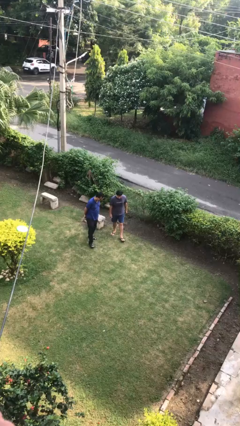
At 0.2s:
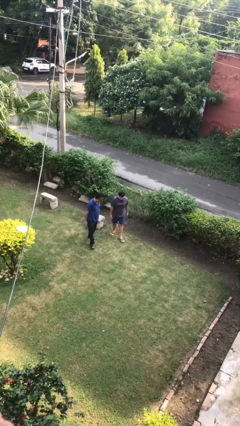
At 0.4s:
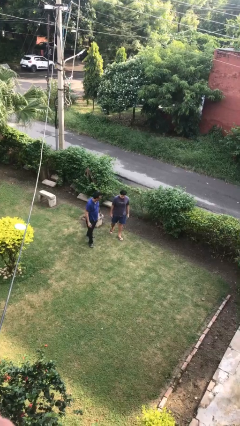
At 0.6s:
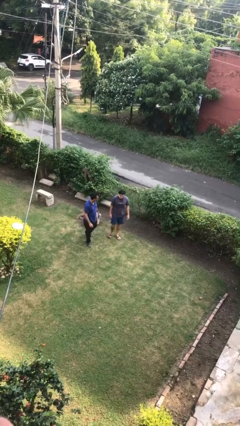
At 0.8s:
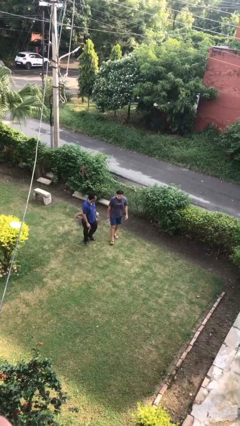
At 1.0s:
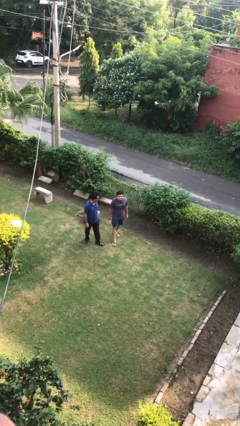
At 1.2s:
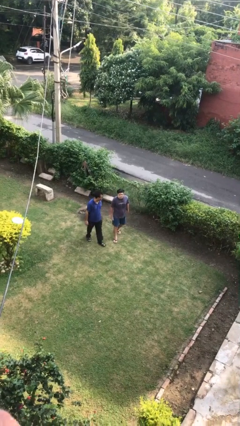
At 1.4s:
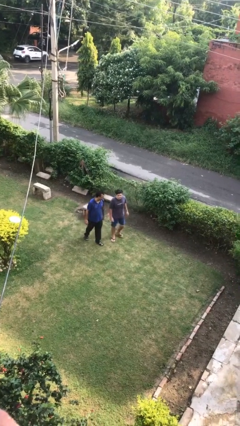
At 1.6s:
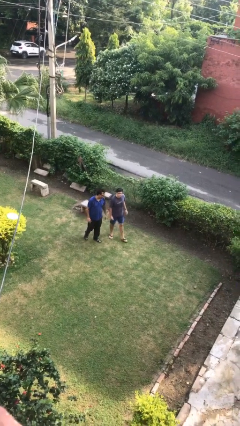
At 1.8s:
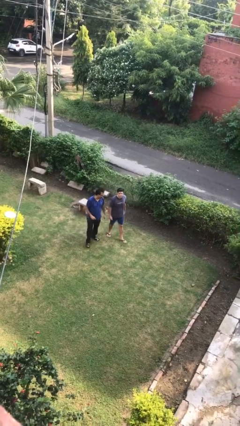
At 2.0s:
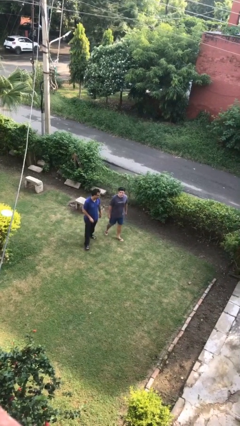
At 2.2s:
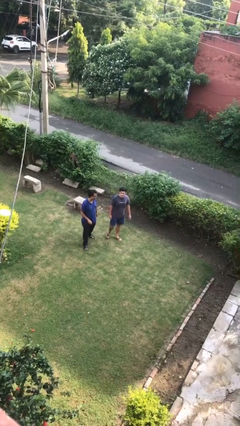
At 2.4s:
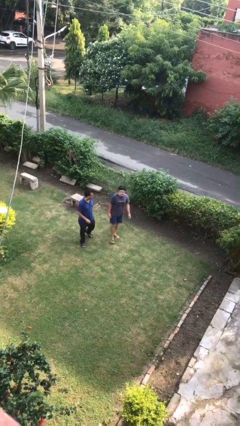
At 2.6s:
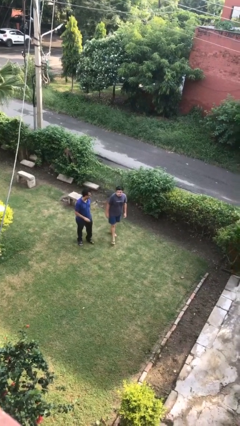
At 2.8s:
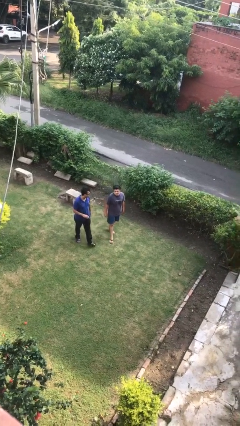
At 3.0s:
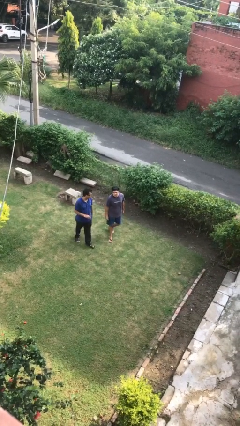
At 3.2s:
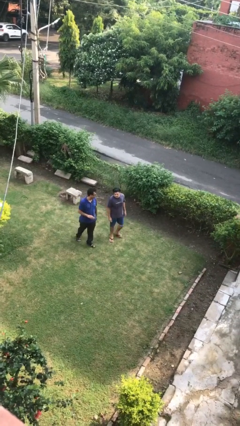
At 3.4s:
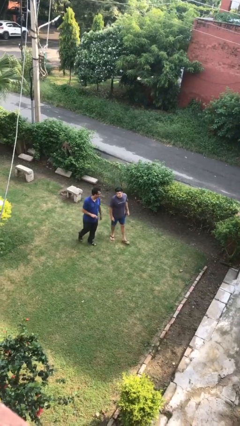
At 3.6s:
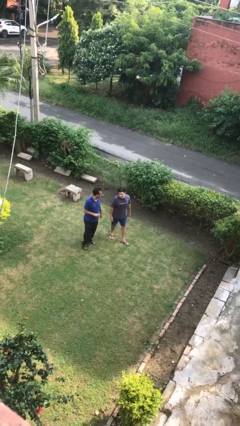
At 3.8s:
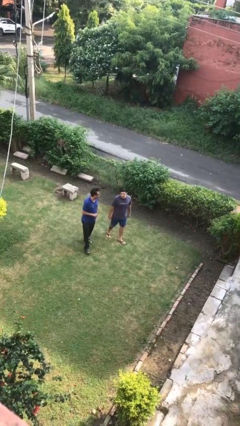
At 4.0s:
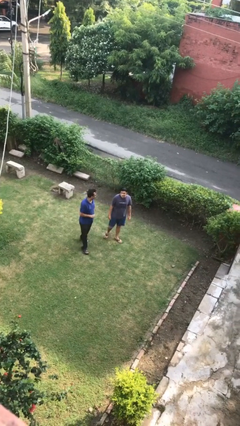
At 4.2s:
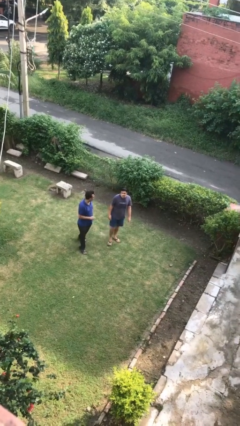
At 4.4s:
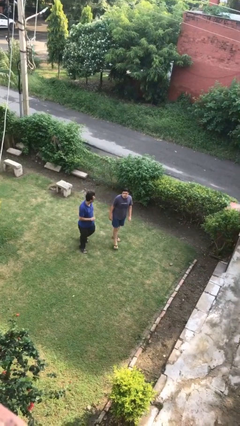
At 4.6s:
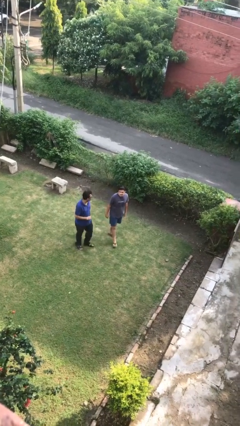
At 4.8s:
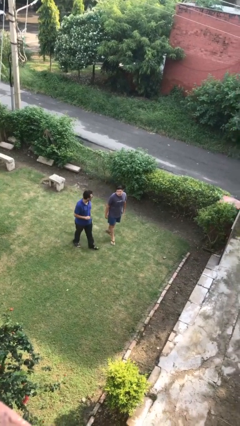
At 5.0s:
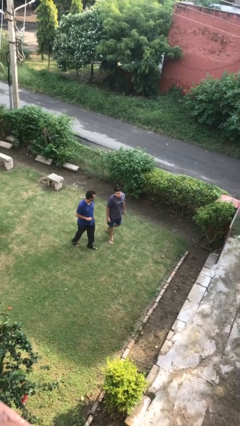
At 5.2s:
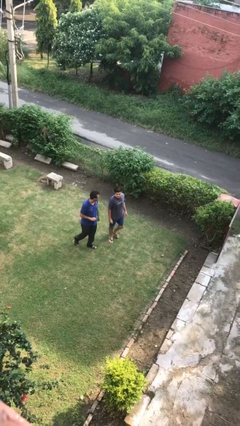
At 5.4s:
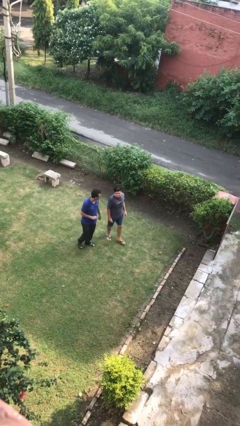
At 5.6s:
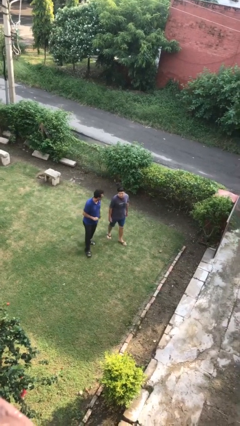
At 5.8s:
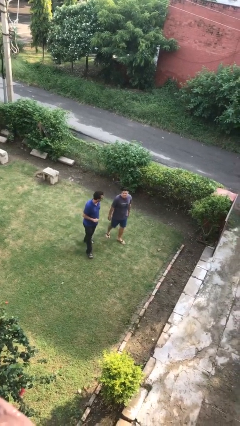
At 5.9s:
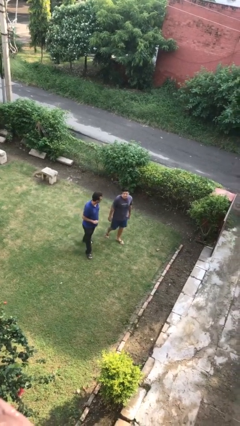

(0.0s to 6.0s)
person talks to person

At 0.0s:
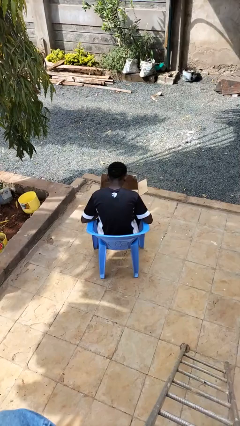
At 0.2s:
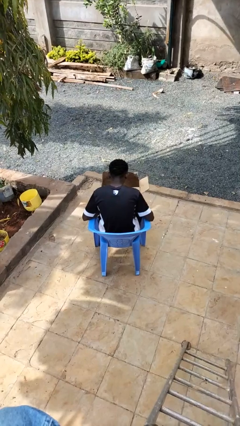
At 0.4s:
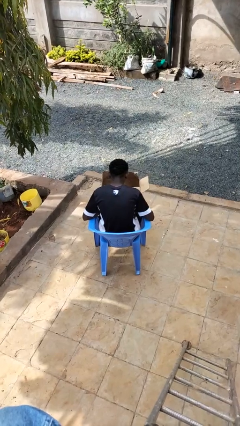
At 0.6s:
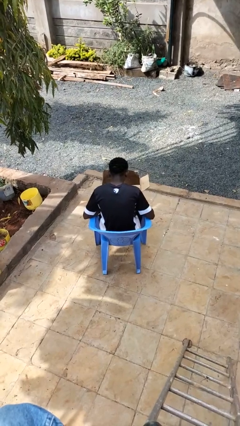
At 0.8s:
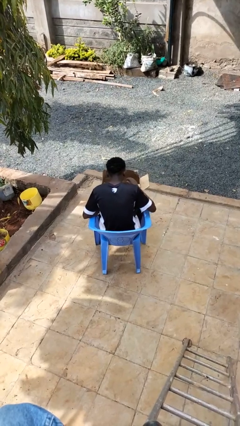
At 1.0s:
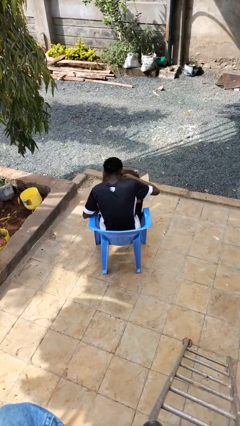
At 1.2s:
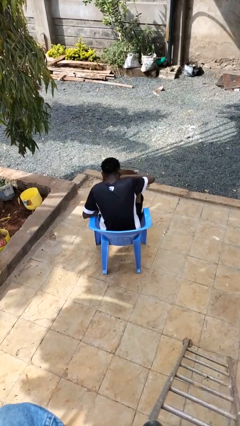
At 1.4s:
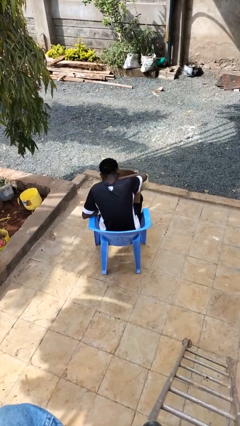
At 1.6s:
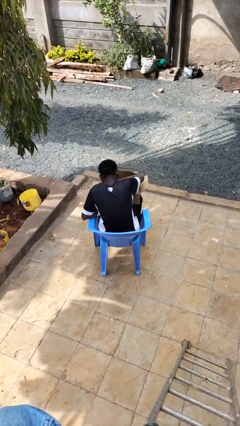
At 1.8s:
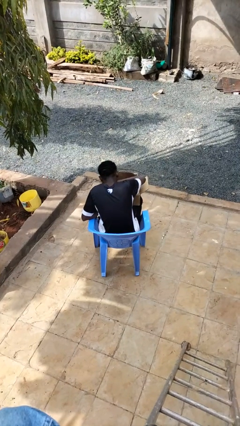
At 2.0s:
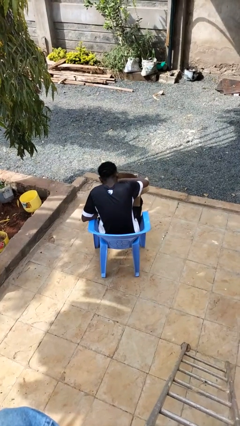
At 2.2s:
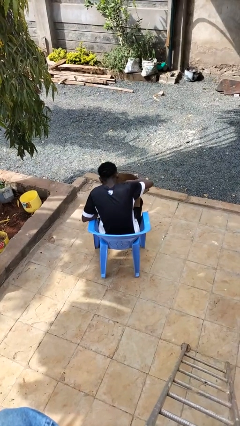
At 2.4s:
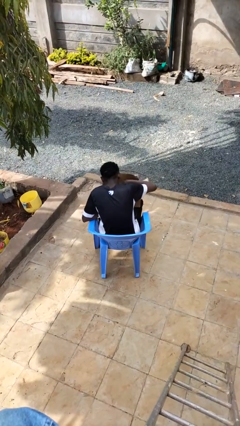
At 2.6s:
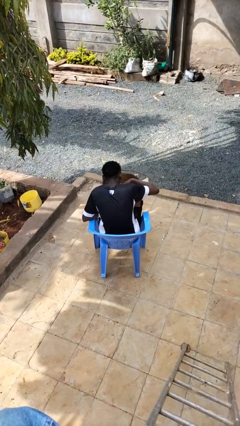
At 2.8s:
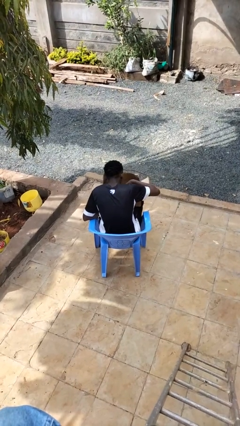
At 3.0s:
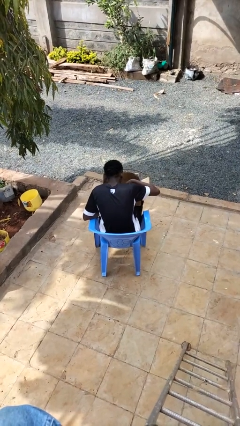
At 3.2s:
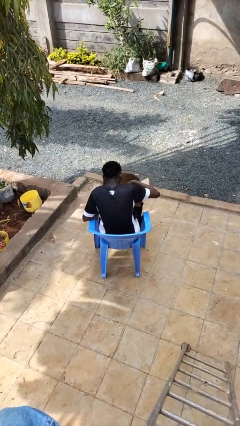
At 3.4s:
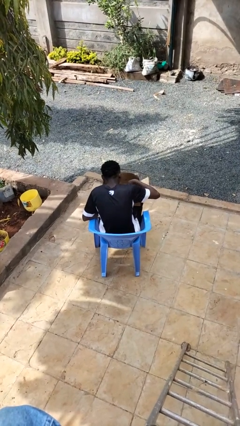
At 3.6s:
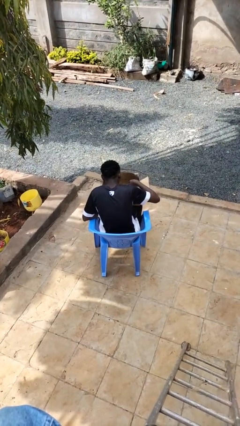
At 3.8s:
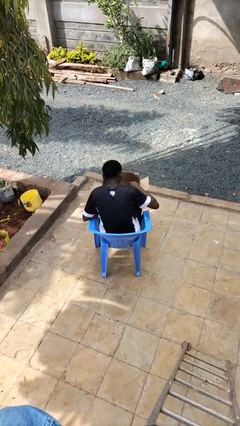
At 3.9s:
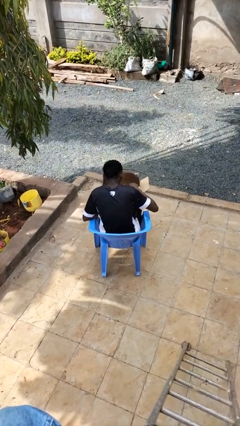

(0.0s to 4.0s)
person searches in box

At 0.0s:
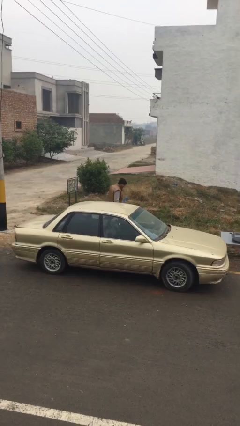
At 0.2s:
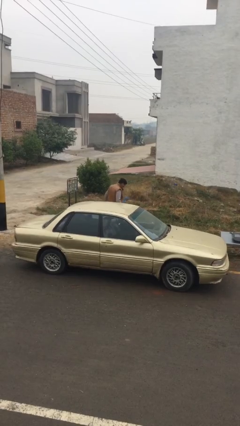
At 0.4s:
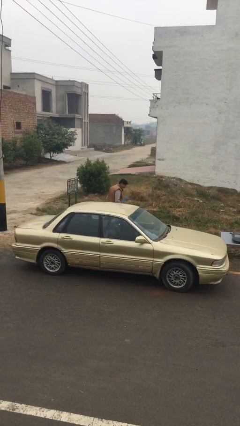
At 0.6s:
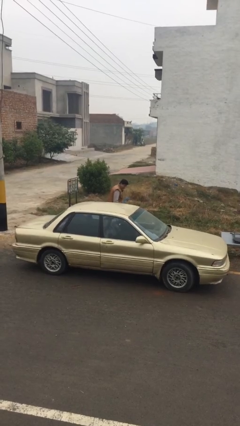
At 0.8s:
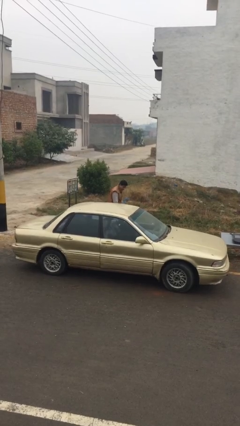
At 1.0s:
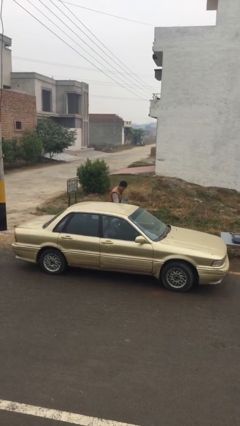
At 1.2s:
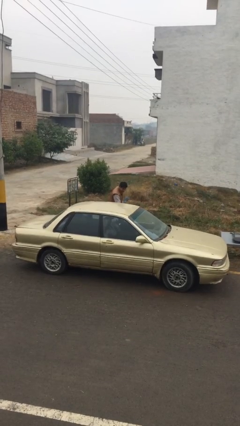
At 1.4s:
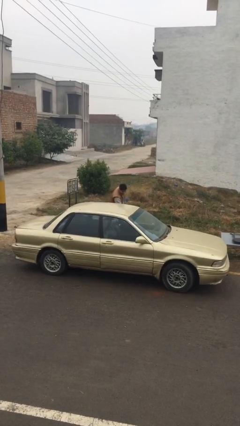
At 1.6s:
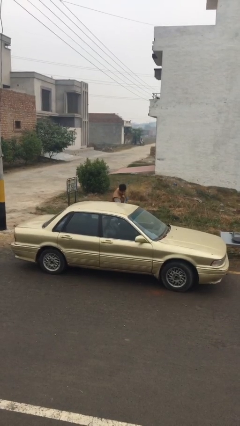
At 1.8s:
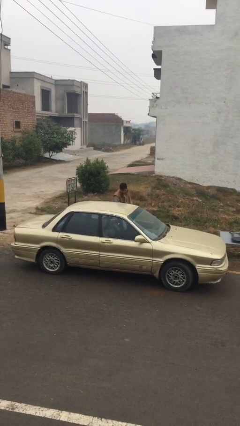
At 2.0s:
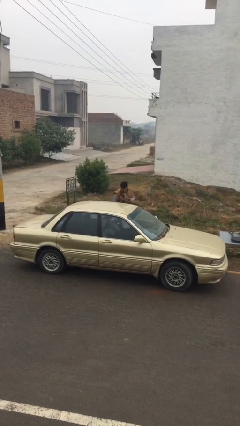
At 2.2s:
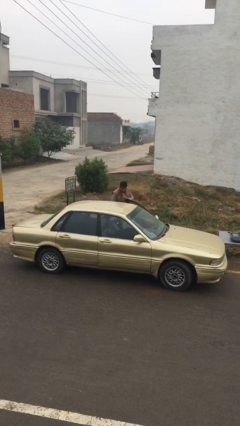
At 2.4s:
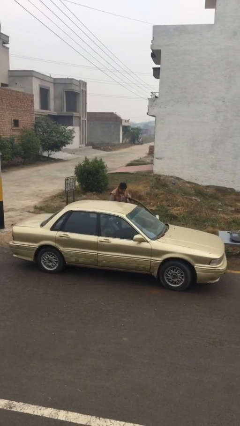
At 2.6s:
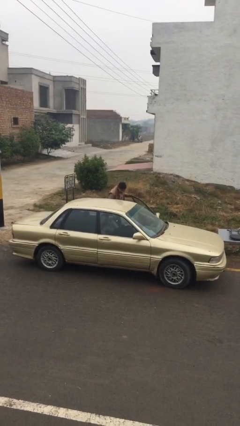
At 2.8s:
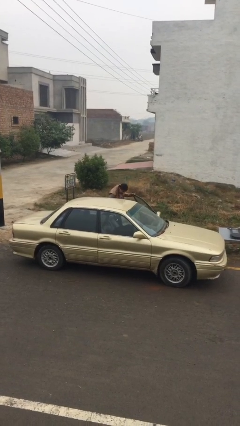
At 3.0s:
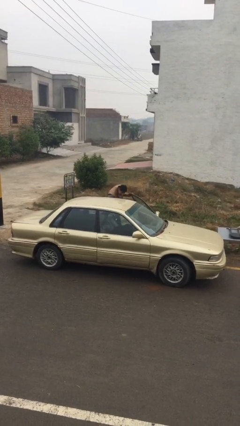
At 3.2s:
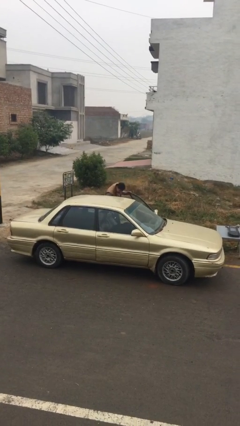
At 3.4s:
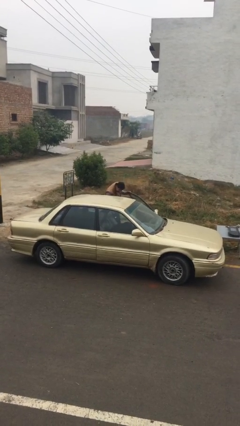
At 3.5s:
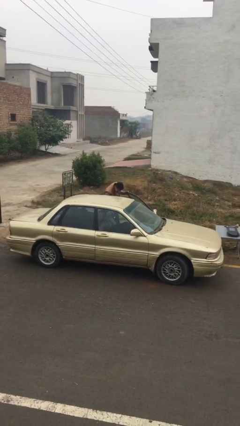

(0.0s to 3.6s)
person opens car door

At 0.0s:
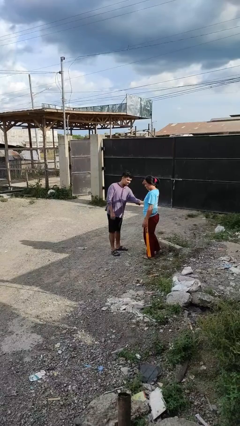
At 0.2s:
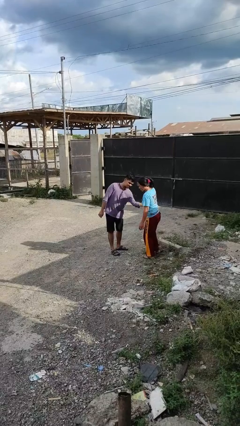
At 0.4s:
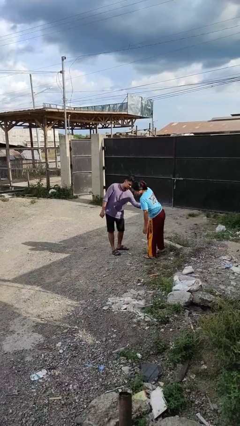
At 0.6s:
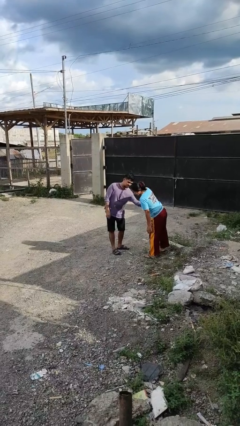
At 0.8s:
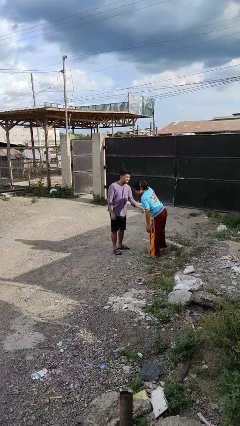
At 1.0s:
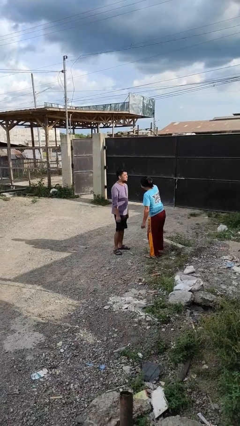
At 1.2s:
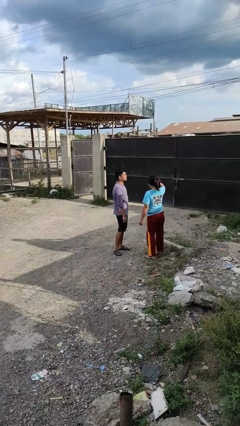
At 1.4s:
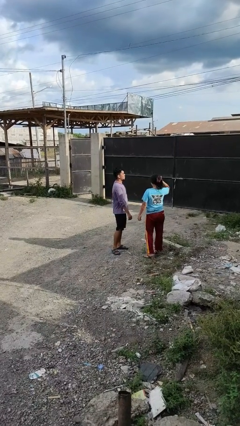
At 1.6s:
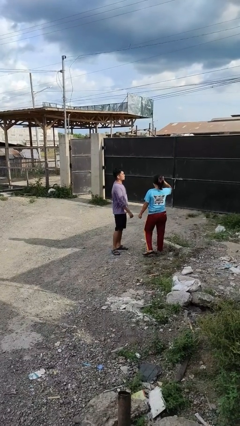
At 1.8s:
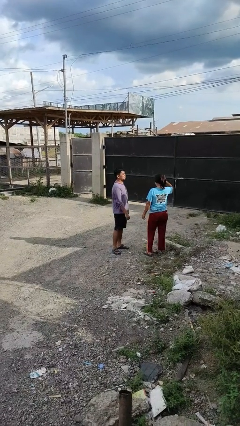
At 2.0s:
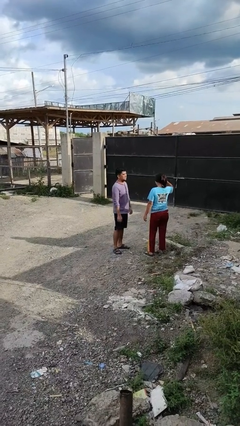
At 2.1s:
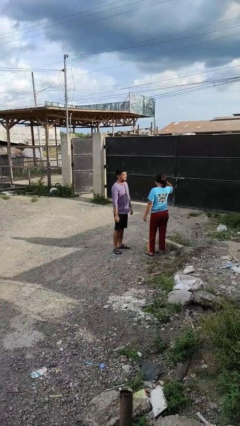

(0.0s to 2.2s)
person tickles person

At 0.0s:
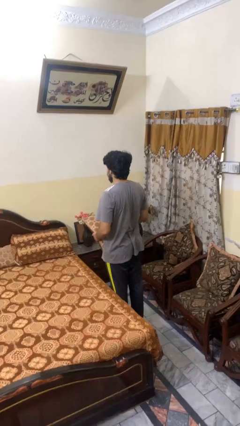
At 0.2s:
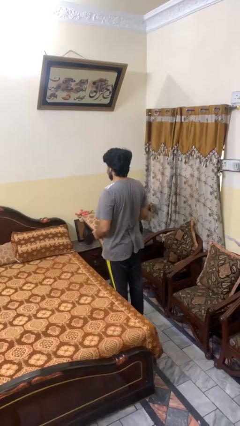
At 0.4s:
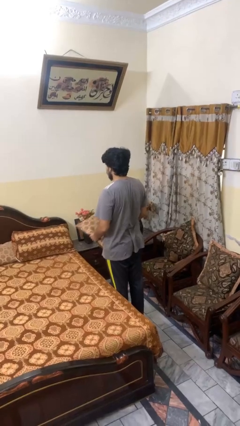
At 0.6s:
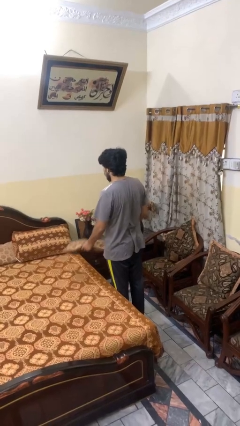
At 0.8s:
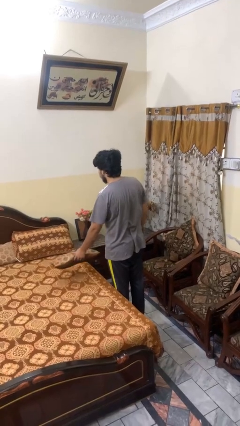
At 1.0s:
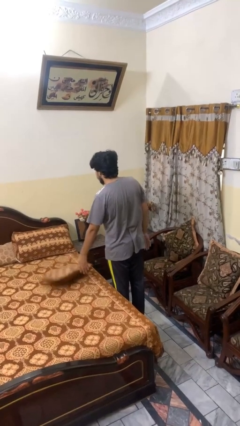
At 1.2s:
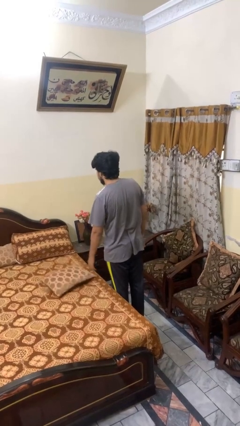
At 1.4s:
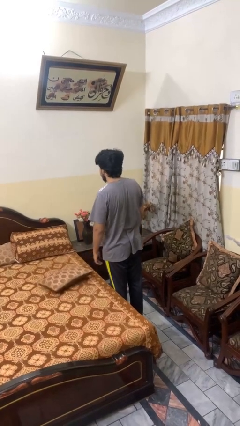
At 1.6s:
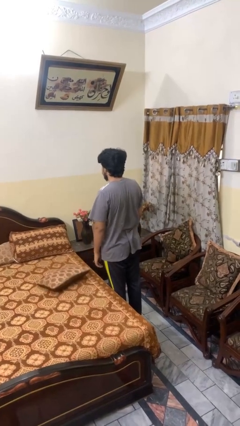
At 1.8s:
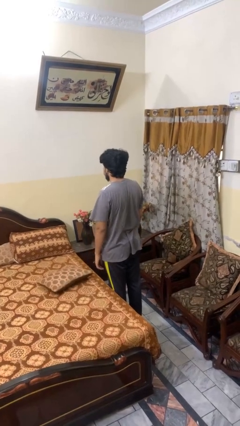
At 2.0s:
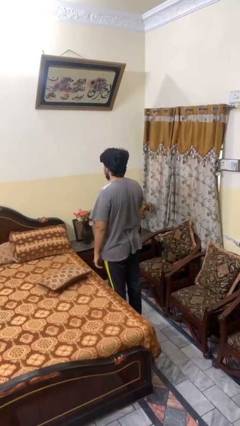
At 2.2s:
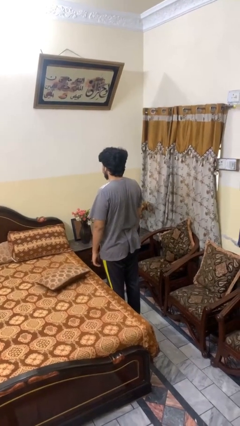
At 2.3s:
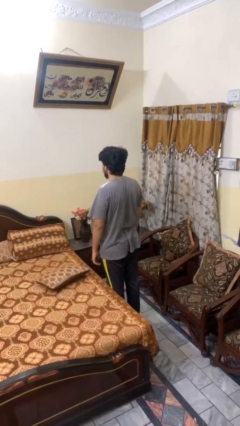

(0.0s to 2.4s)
person puts down object on bed
